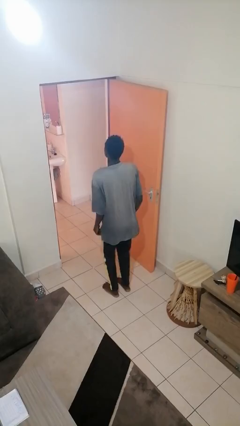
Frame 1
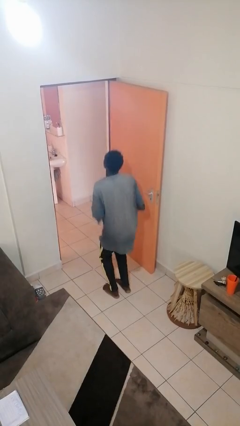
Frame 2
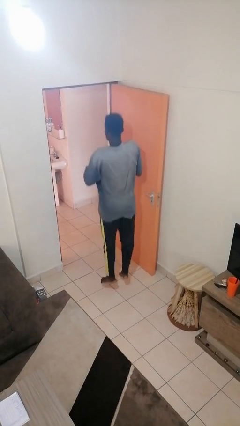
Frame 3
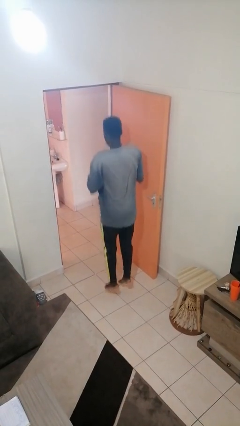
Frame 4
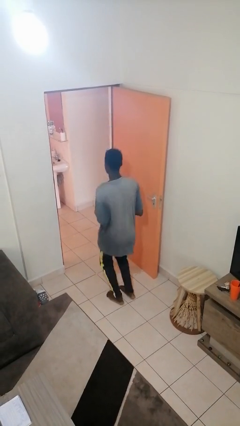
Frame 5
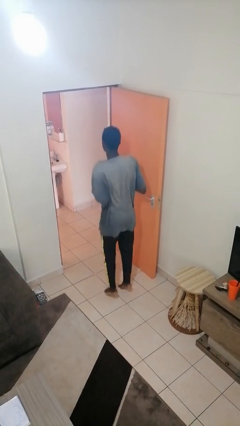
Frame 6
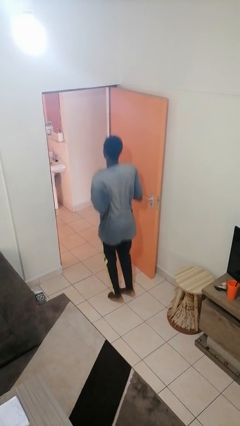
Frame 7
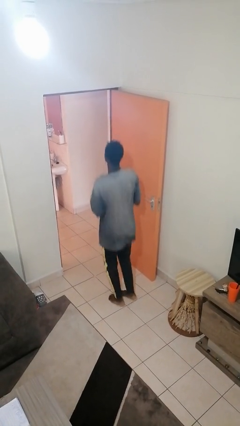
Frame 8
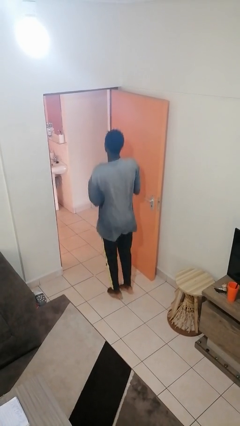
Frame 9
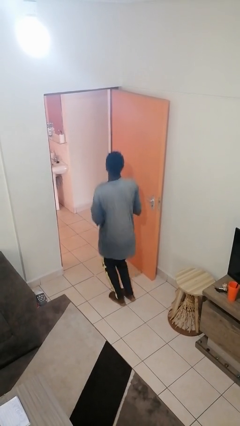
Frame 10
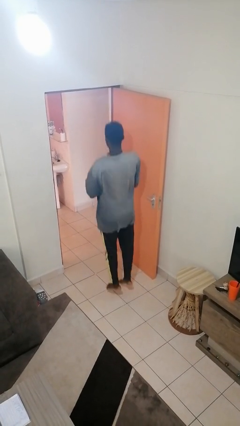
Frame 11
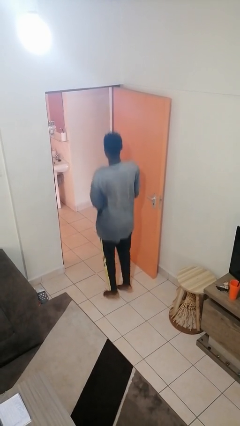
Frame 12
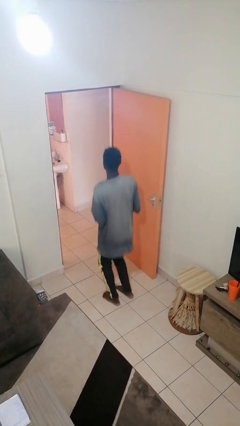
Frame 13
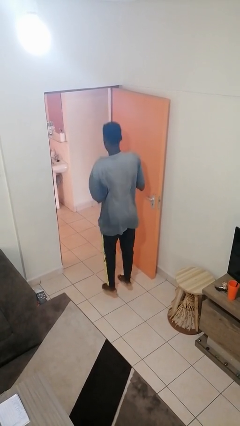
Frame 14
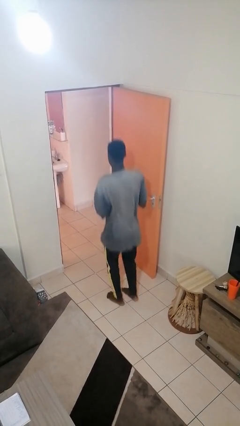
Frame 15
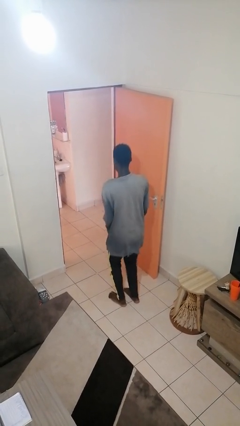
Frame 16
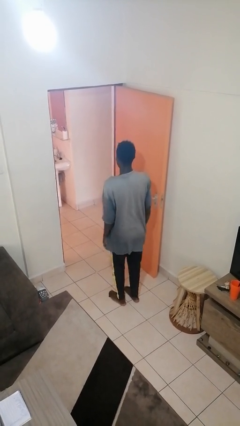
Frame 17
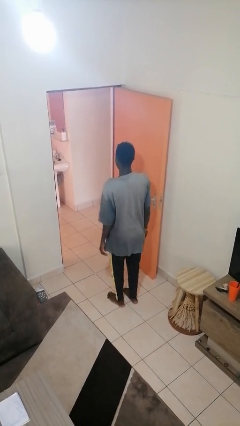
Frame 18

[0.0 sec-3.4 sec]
person jumps

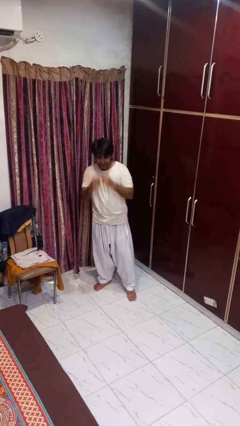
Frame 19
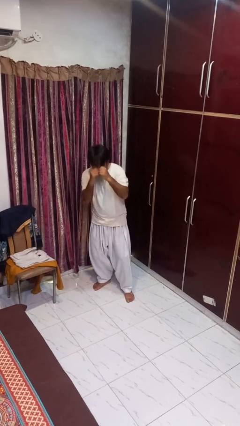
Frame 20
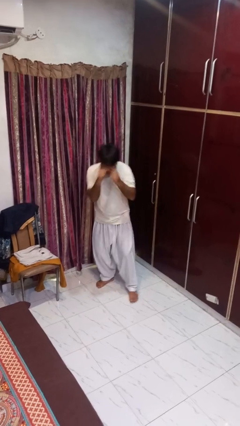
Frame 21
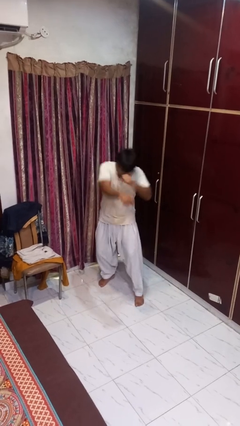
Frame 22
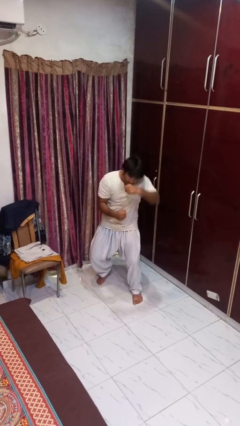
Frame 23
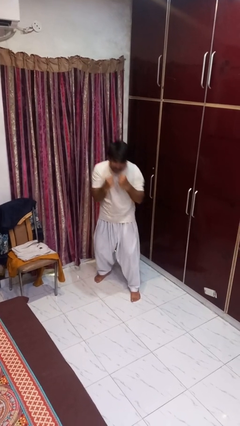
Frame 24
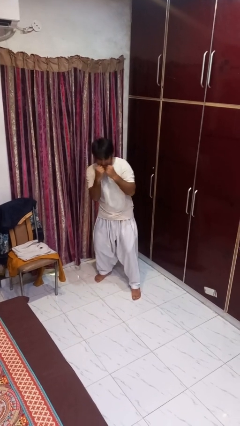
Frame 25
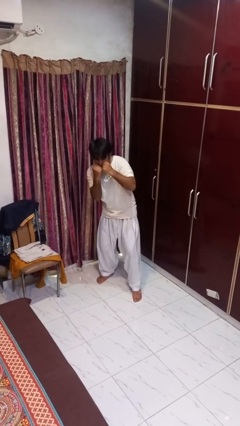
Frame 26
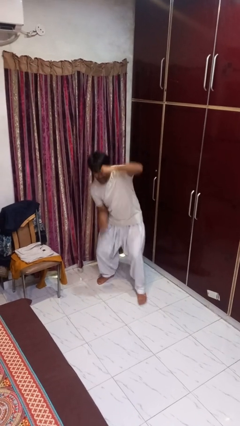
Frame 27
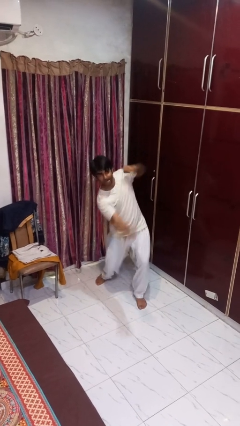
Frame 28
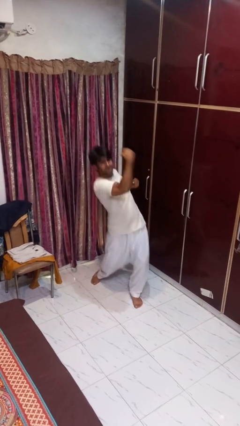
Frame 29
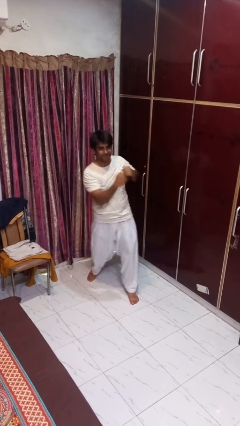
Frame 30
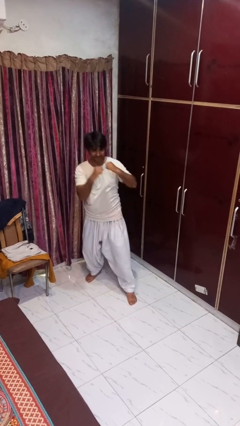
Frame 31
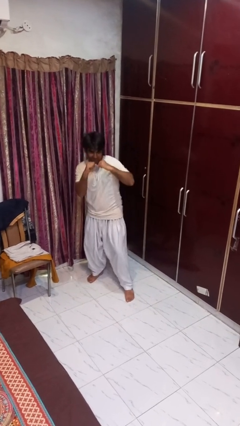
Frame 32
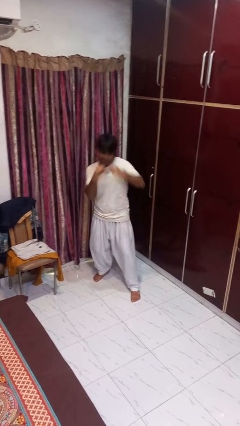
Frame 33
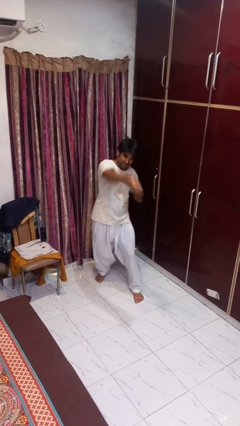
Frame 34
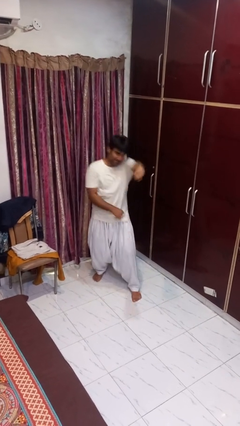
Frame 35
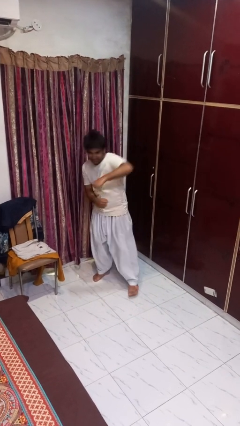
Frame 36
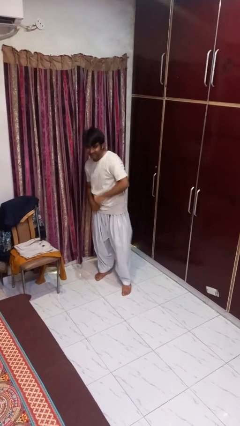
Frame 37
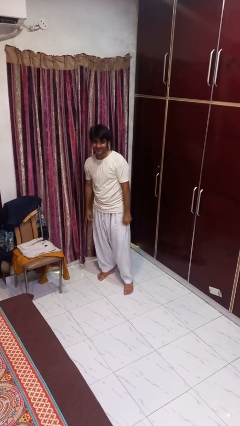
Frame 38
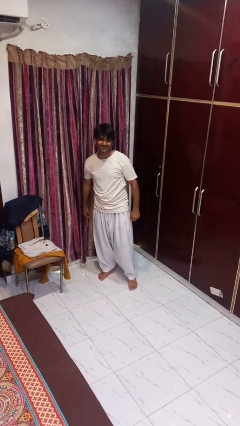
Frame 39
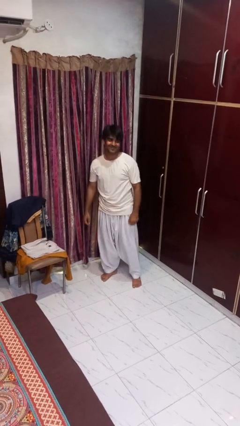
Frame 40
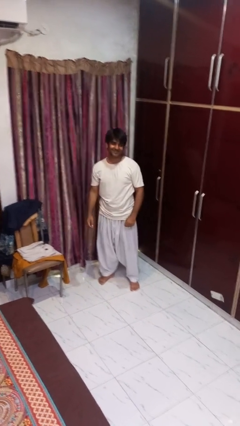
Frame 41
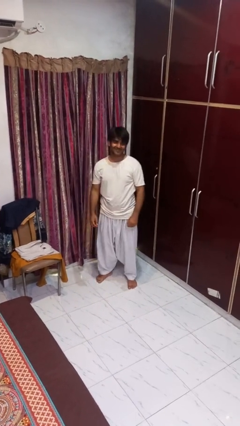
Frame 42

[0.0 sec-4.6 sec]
person punches

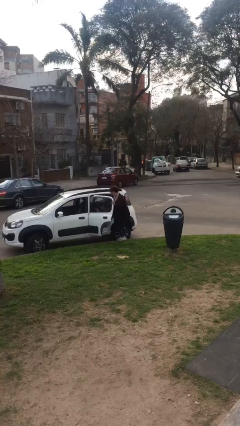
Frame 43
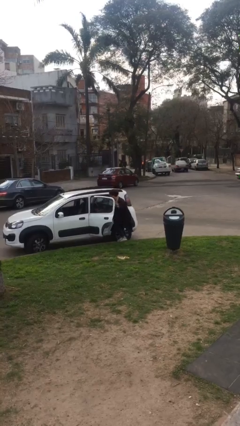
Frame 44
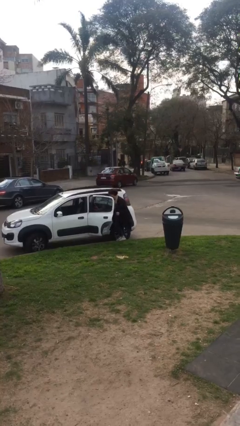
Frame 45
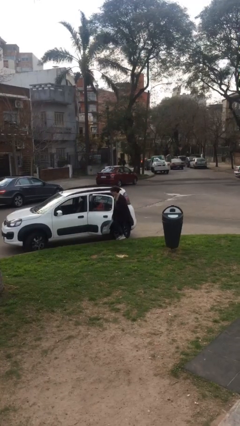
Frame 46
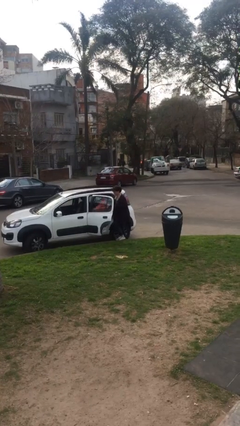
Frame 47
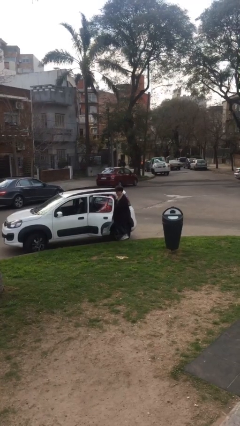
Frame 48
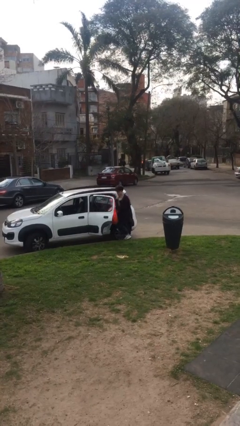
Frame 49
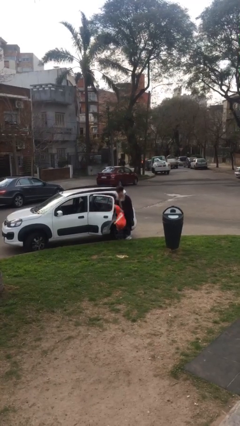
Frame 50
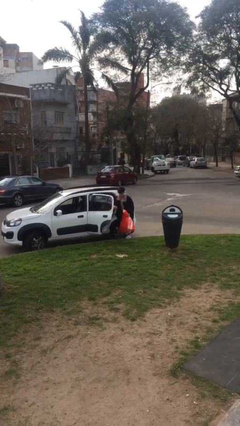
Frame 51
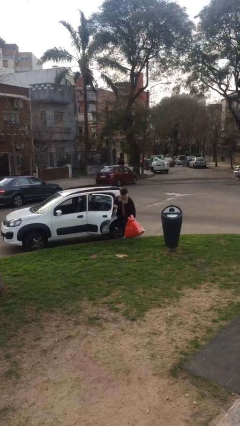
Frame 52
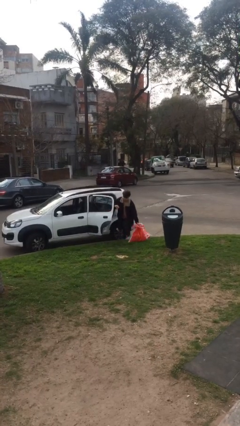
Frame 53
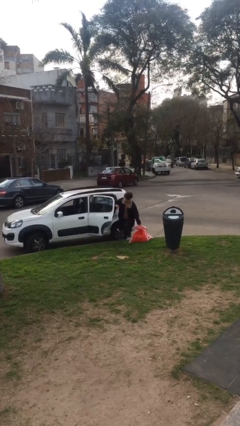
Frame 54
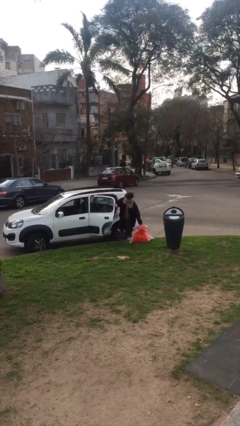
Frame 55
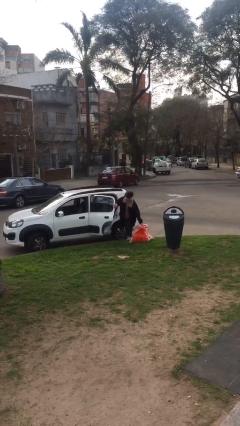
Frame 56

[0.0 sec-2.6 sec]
person unloads car

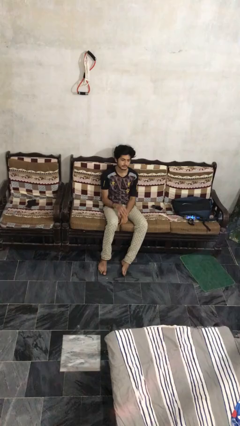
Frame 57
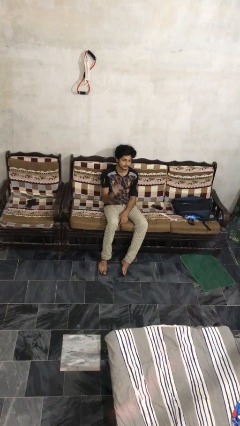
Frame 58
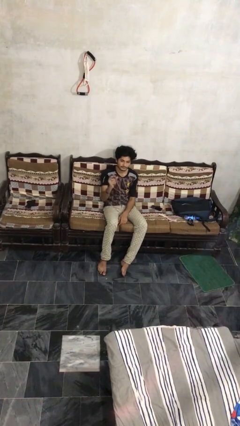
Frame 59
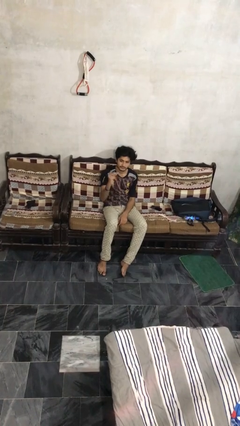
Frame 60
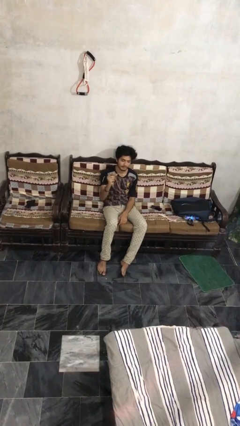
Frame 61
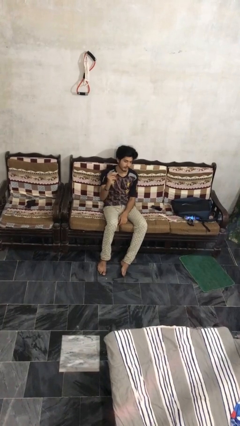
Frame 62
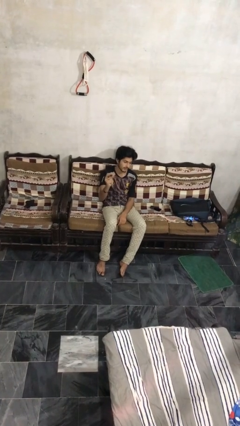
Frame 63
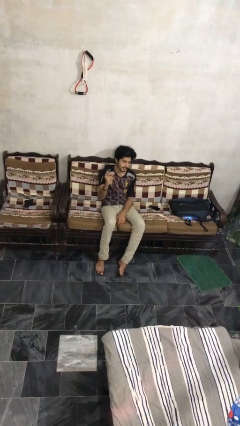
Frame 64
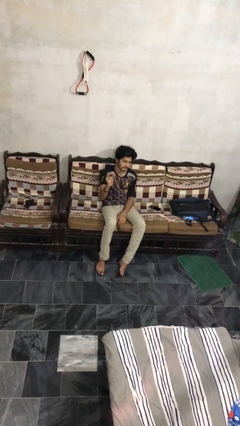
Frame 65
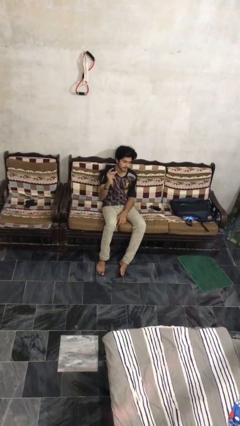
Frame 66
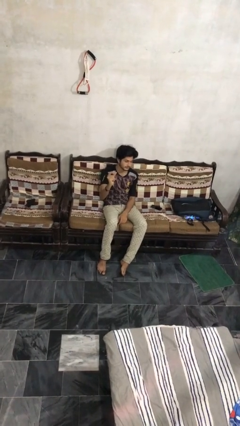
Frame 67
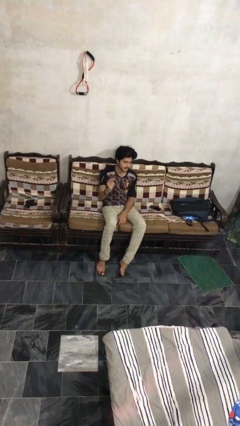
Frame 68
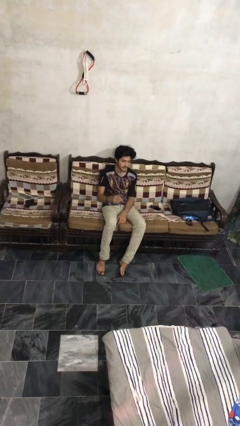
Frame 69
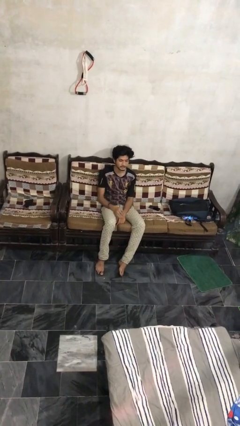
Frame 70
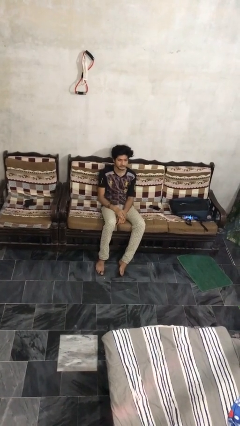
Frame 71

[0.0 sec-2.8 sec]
person snaps fingers

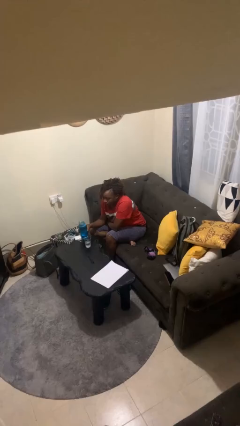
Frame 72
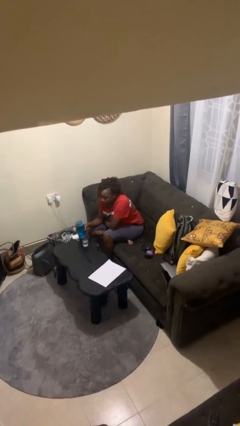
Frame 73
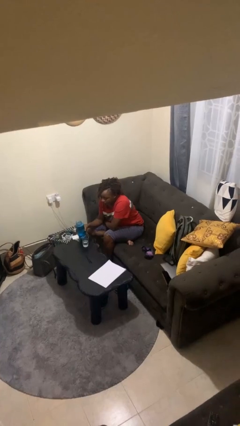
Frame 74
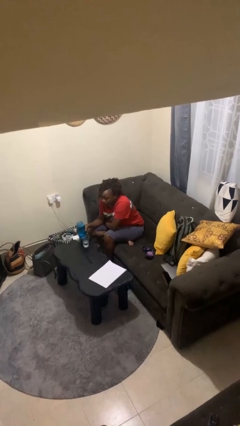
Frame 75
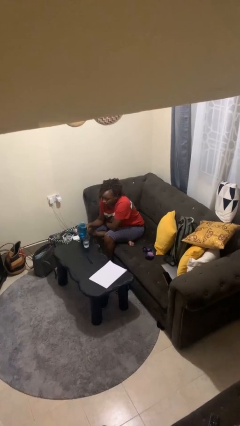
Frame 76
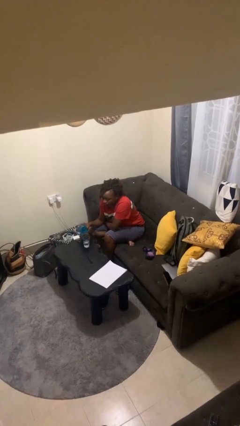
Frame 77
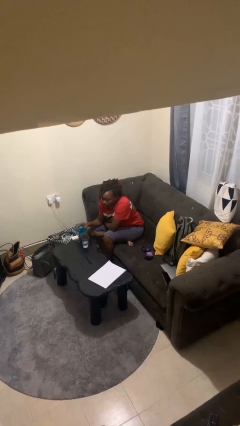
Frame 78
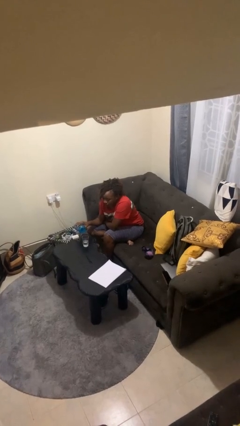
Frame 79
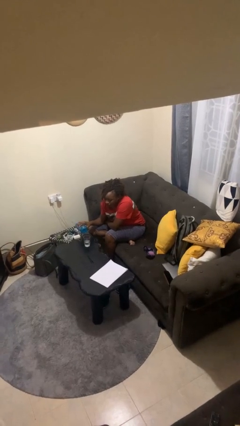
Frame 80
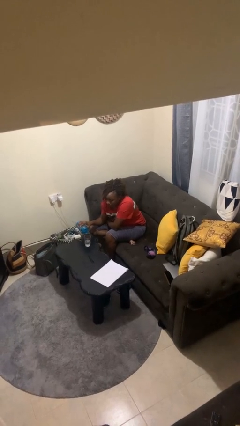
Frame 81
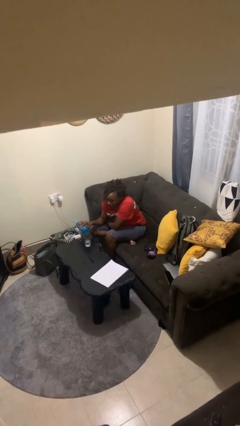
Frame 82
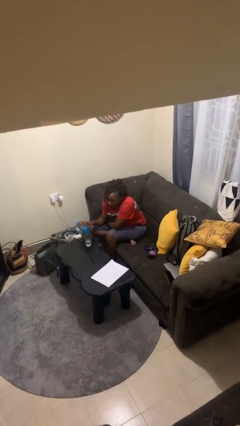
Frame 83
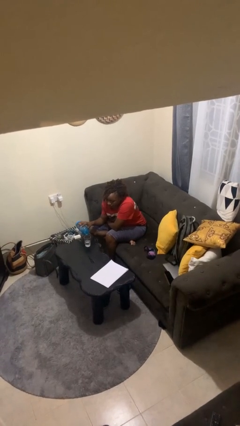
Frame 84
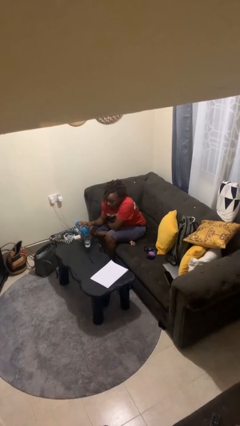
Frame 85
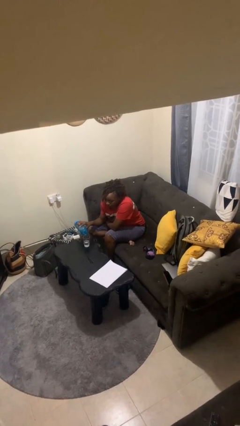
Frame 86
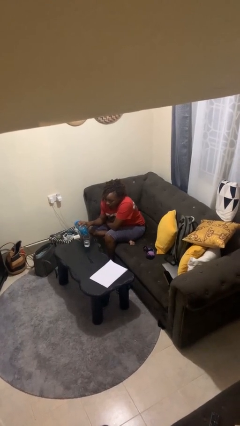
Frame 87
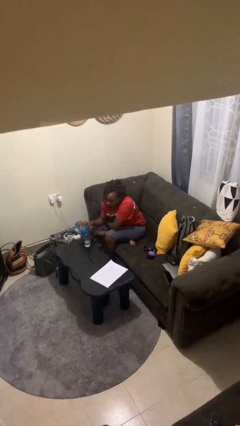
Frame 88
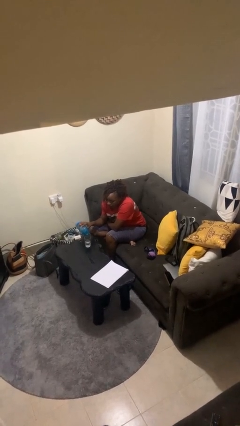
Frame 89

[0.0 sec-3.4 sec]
person pours liquid into cup

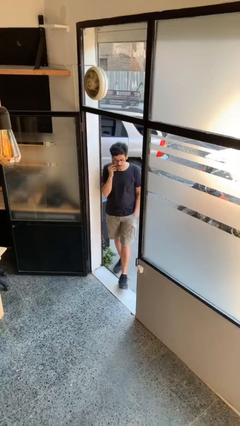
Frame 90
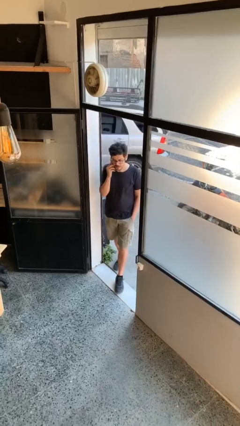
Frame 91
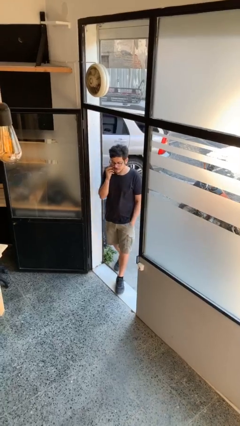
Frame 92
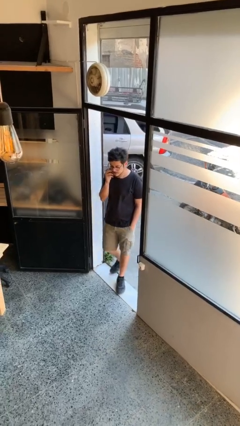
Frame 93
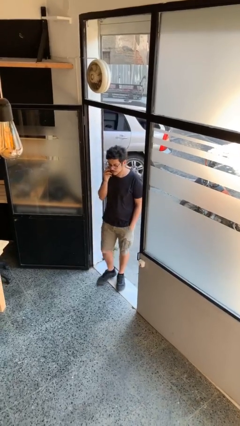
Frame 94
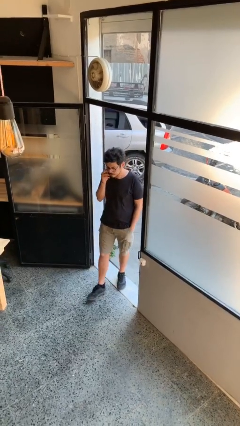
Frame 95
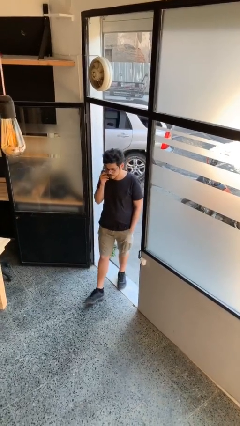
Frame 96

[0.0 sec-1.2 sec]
person enters scene through structure
